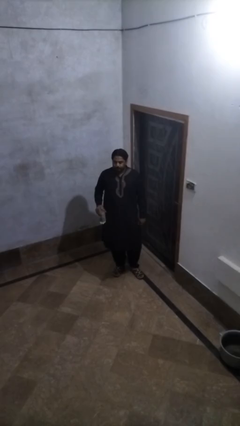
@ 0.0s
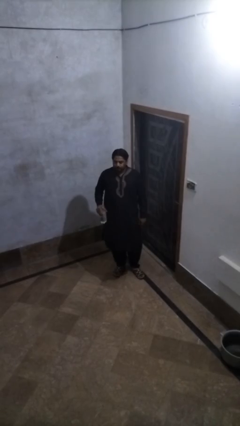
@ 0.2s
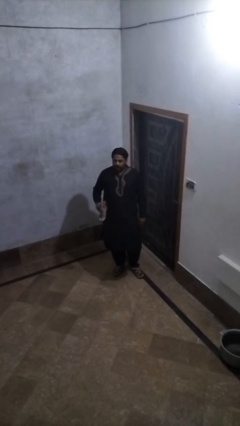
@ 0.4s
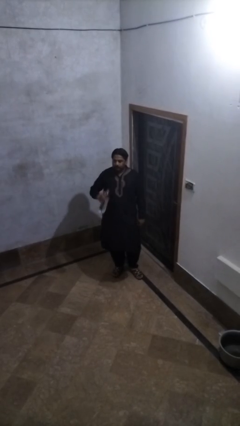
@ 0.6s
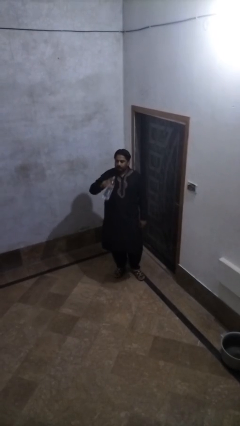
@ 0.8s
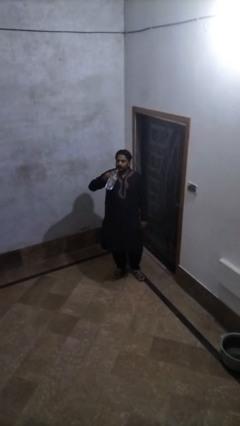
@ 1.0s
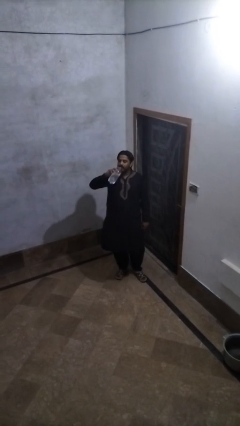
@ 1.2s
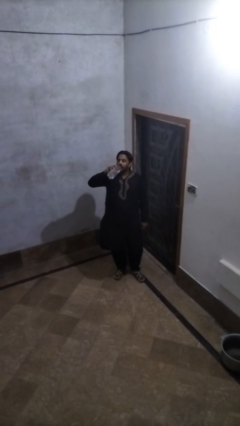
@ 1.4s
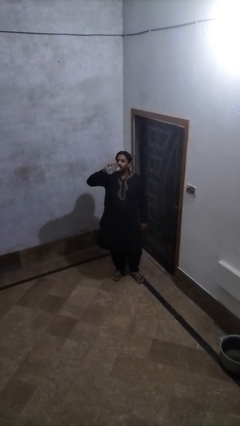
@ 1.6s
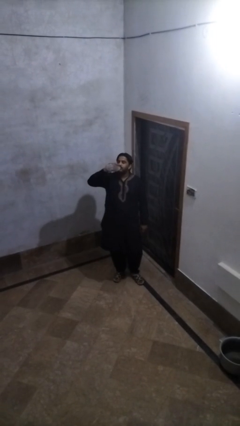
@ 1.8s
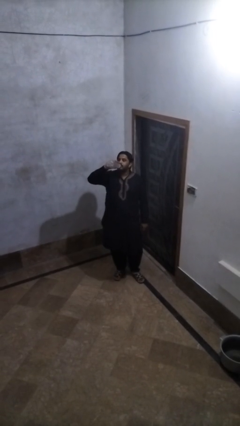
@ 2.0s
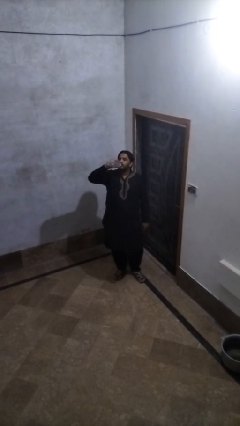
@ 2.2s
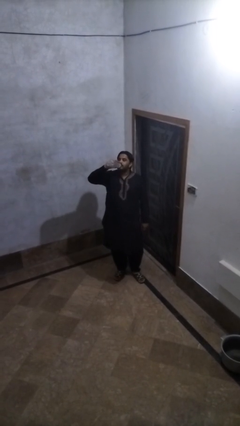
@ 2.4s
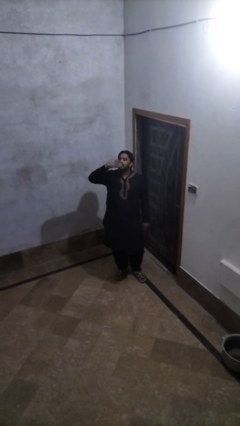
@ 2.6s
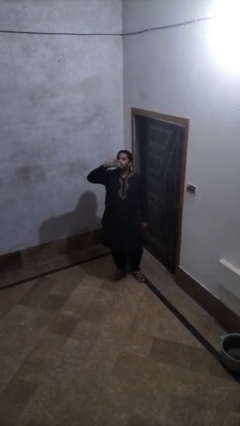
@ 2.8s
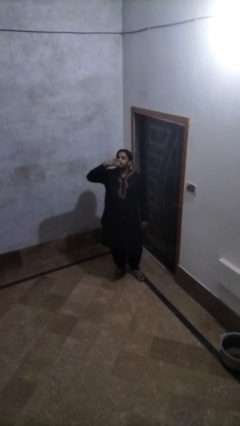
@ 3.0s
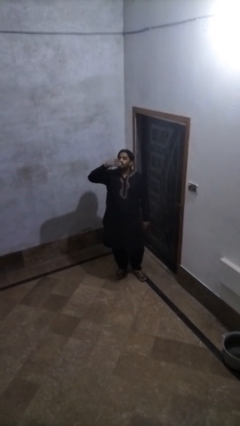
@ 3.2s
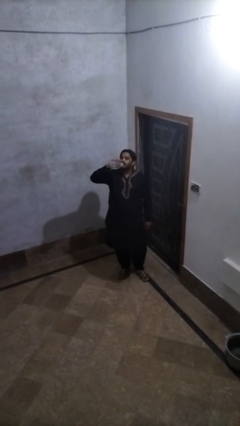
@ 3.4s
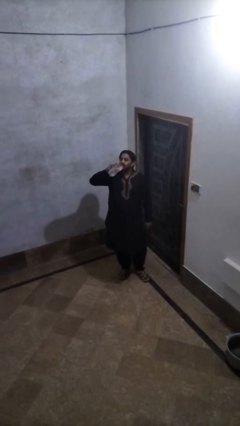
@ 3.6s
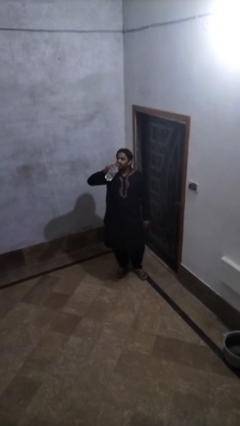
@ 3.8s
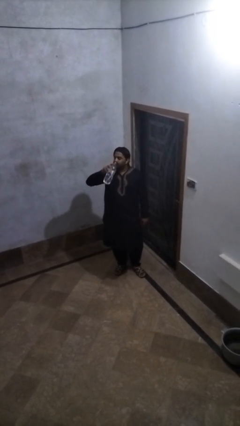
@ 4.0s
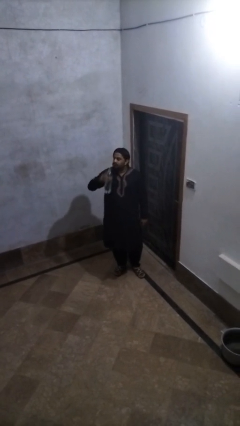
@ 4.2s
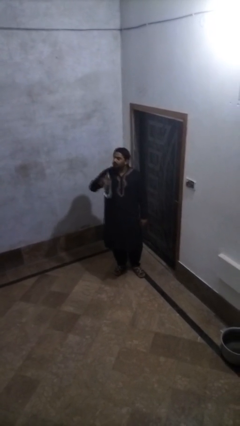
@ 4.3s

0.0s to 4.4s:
person drinks from bottle

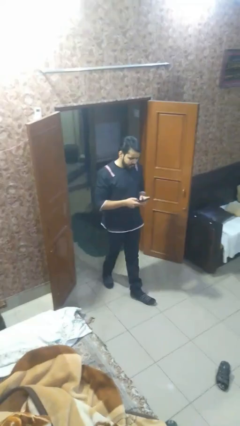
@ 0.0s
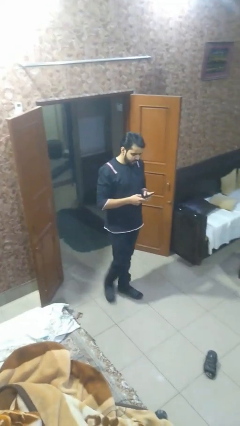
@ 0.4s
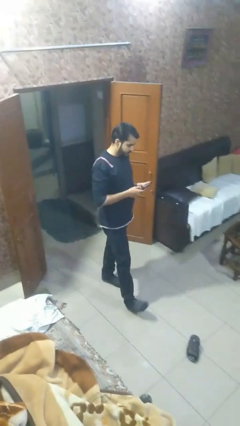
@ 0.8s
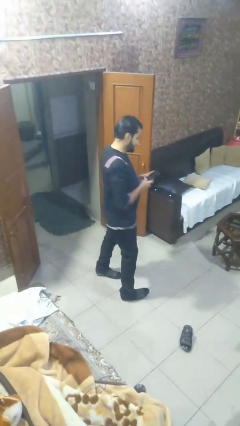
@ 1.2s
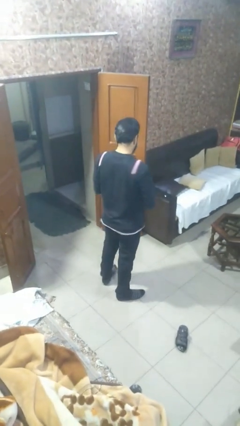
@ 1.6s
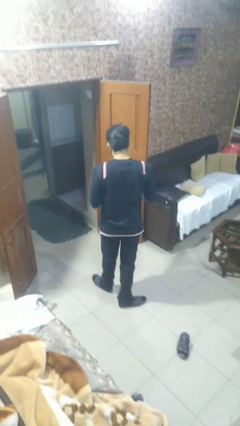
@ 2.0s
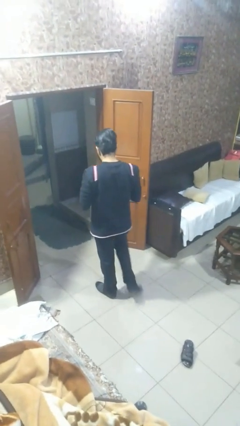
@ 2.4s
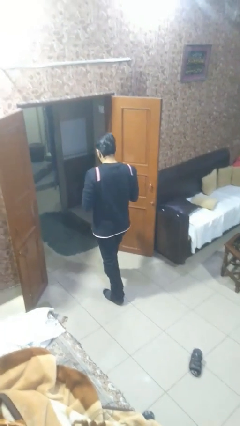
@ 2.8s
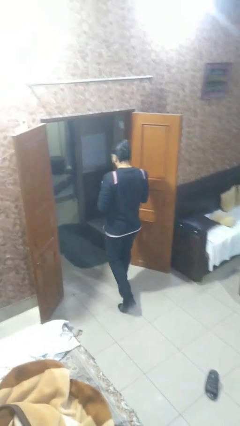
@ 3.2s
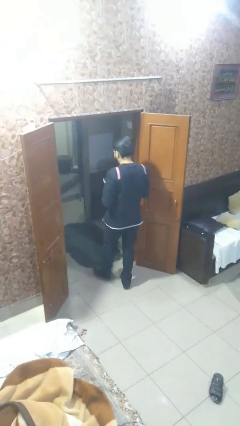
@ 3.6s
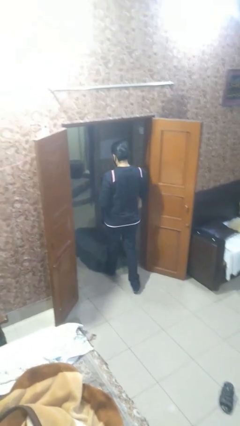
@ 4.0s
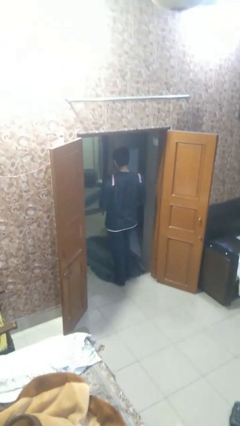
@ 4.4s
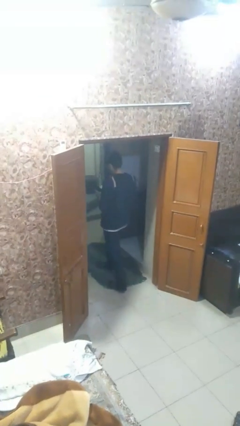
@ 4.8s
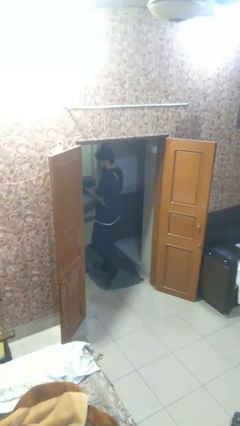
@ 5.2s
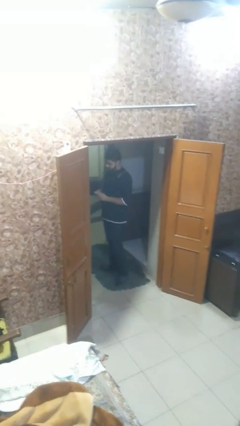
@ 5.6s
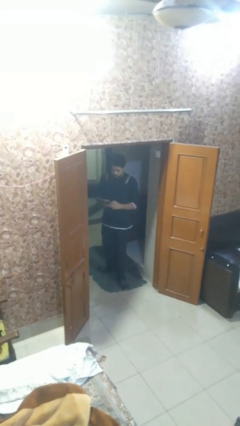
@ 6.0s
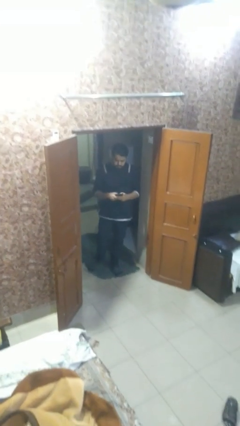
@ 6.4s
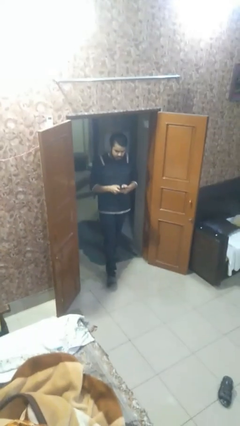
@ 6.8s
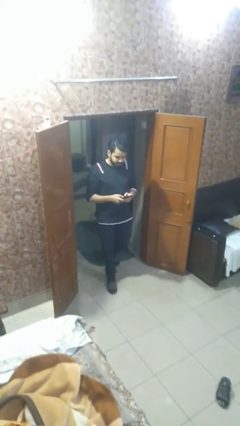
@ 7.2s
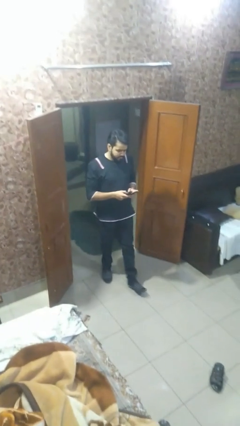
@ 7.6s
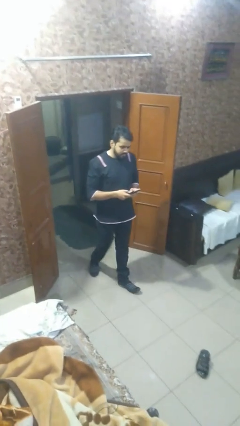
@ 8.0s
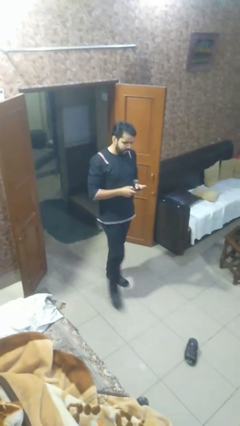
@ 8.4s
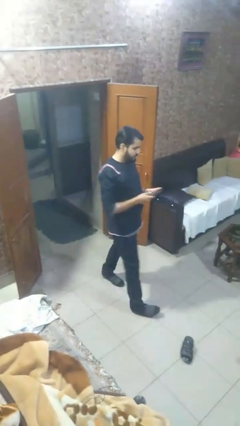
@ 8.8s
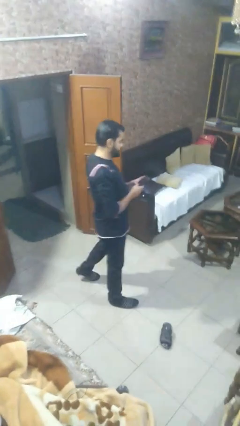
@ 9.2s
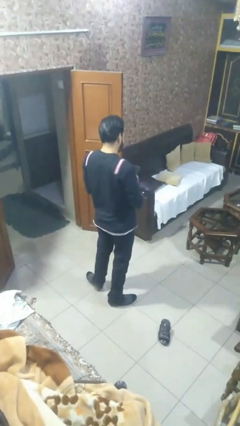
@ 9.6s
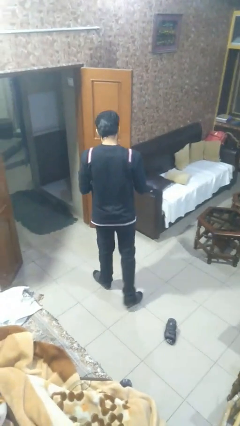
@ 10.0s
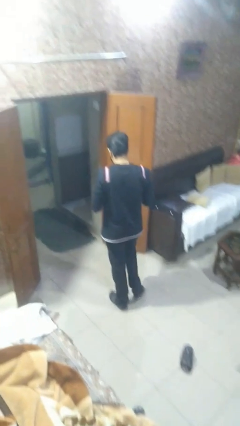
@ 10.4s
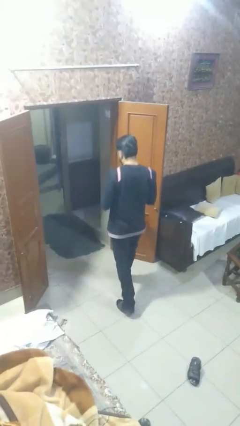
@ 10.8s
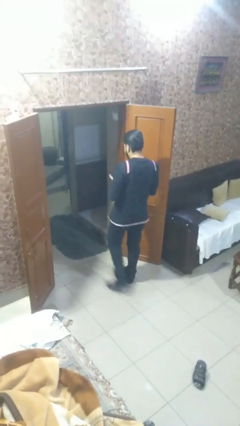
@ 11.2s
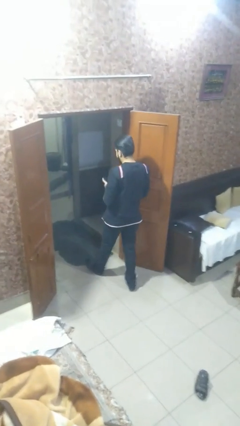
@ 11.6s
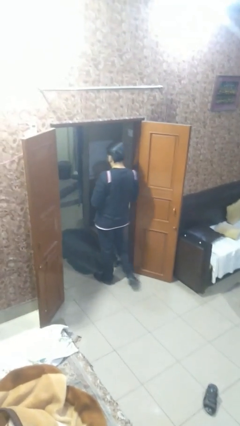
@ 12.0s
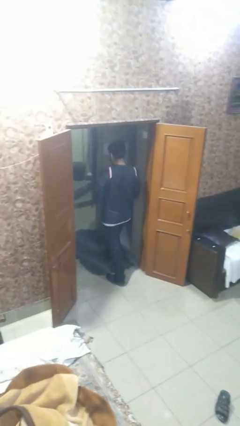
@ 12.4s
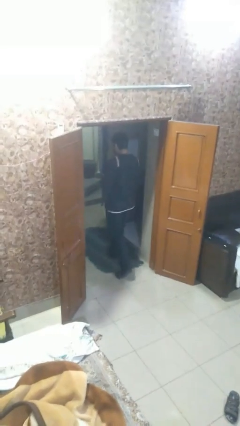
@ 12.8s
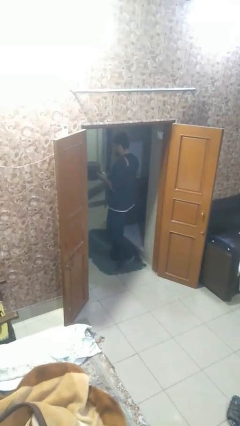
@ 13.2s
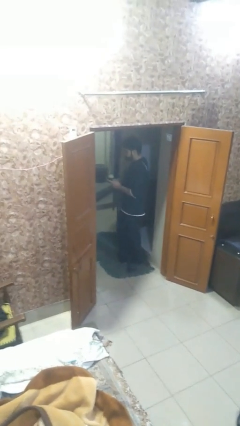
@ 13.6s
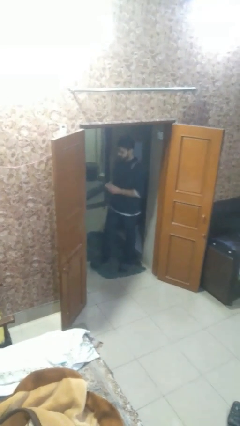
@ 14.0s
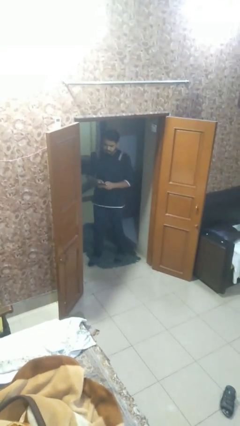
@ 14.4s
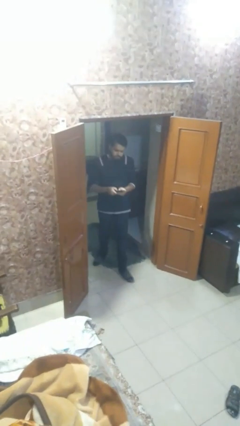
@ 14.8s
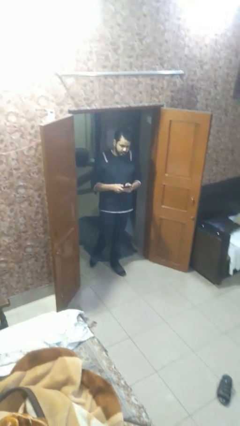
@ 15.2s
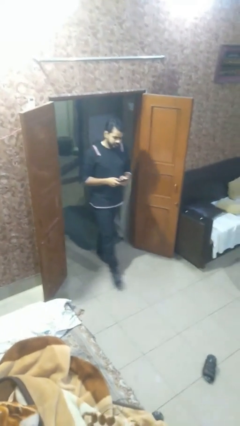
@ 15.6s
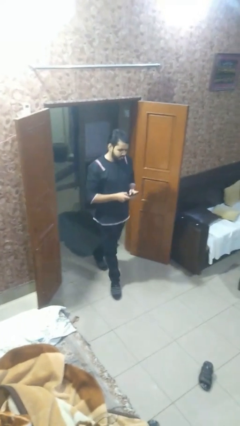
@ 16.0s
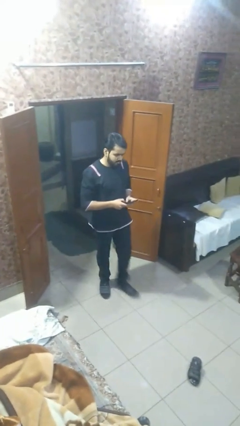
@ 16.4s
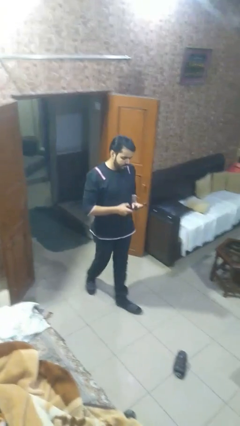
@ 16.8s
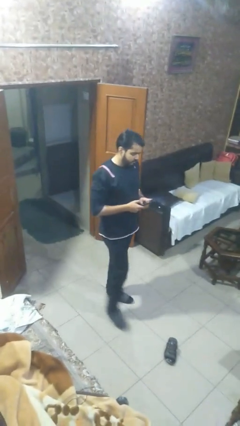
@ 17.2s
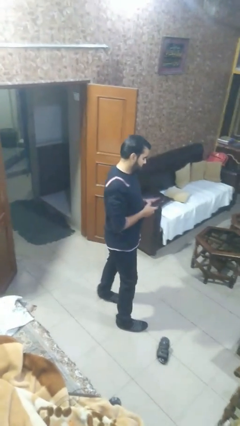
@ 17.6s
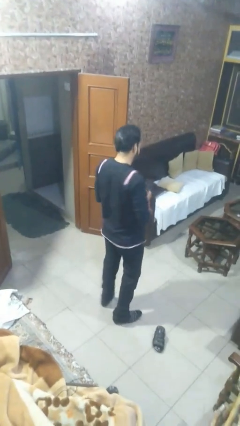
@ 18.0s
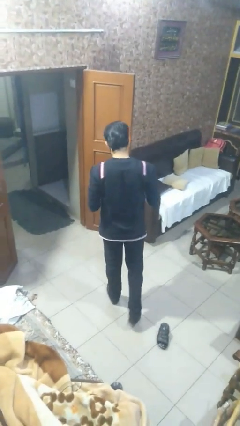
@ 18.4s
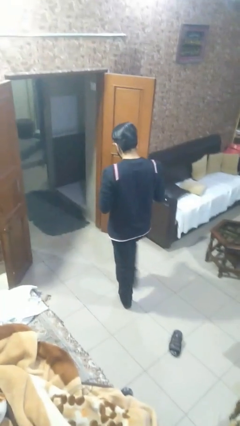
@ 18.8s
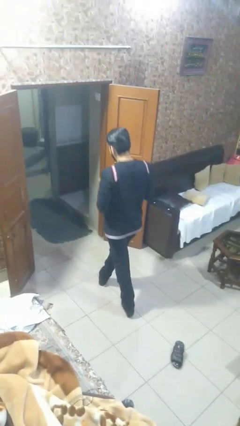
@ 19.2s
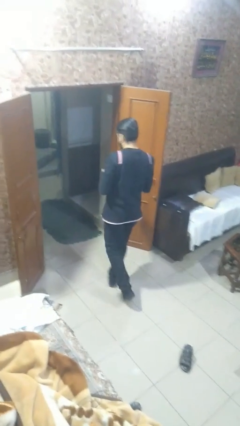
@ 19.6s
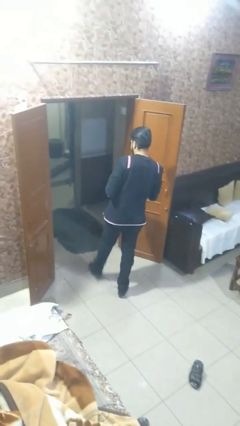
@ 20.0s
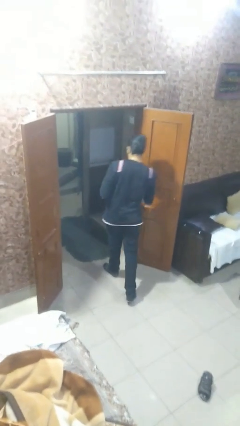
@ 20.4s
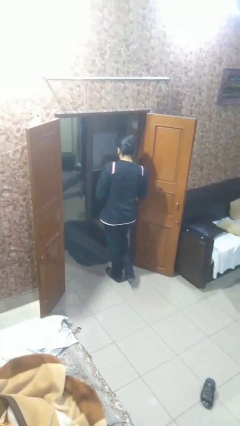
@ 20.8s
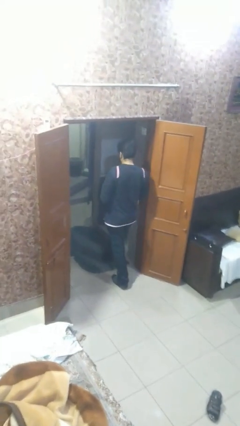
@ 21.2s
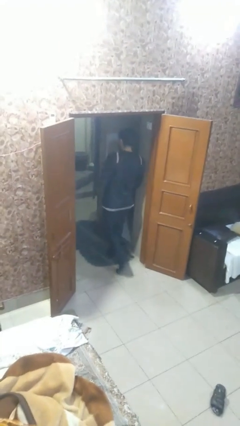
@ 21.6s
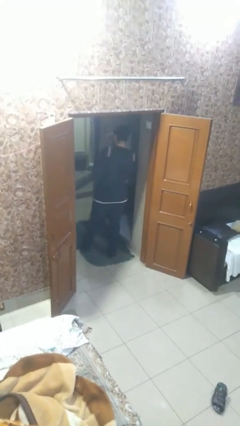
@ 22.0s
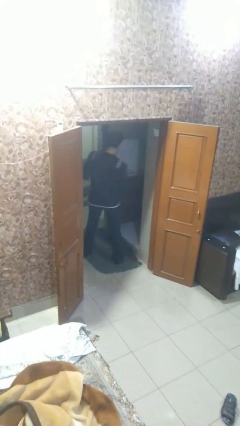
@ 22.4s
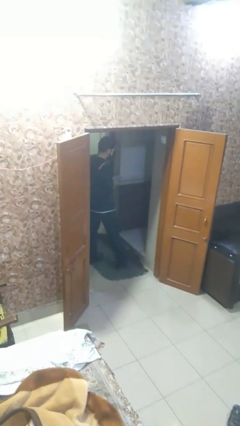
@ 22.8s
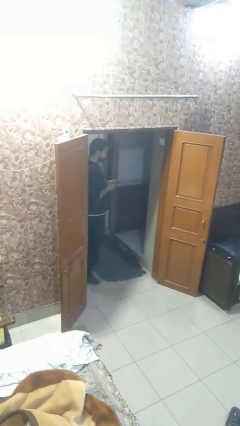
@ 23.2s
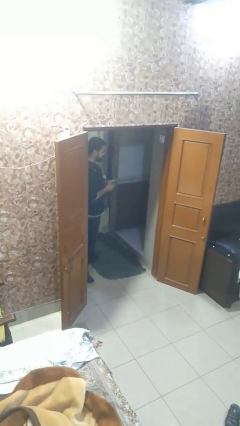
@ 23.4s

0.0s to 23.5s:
person texts on phone

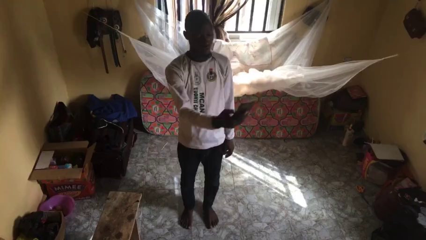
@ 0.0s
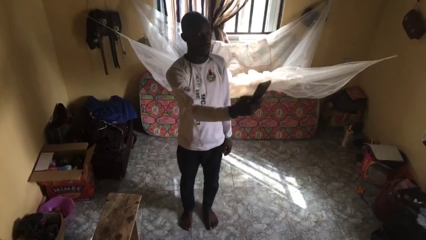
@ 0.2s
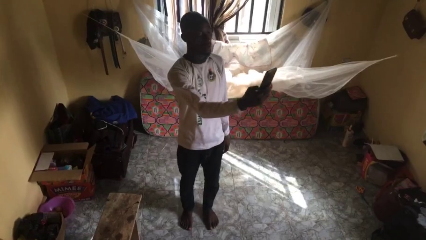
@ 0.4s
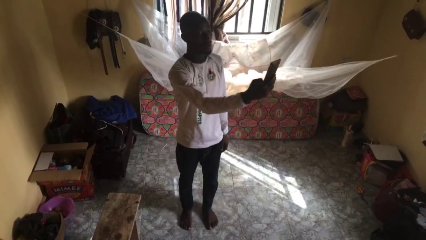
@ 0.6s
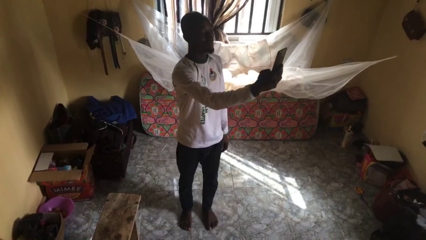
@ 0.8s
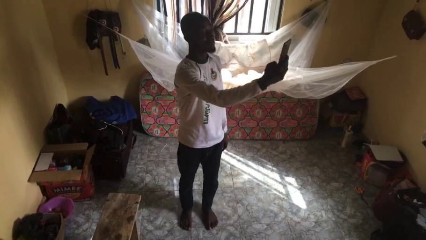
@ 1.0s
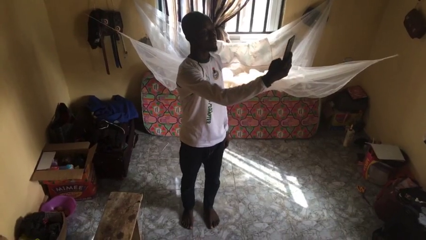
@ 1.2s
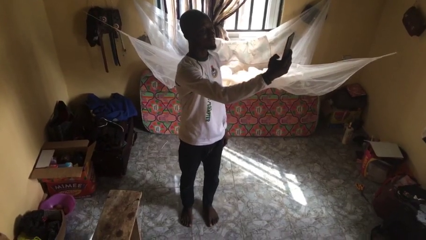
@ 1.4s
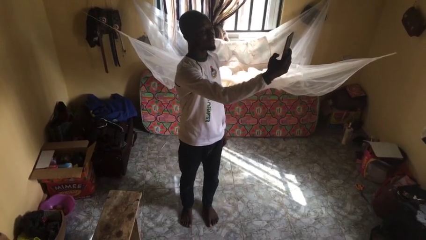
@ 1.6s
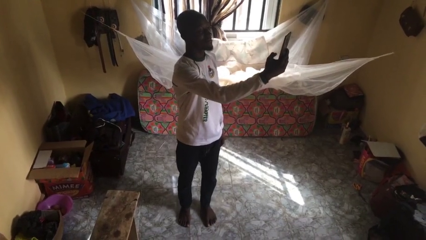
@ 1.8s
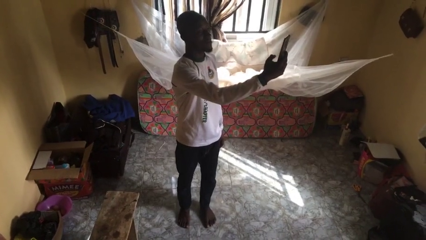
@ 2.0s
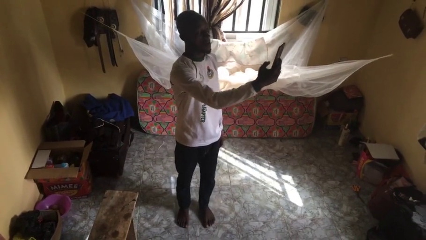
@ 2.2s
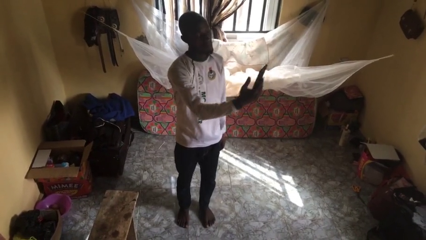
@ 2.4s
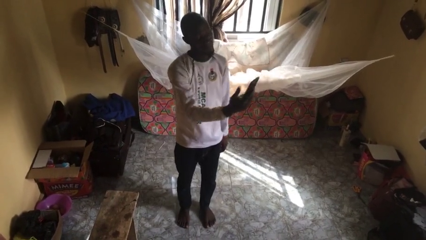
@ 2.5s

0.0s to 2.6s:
person takes selfie
